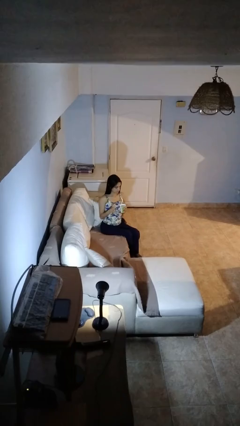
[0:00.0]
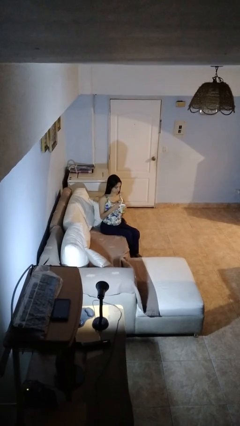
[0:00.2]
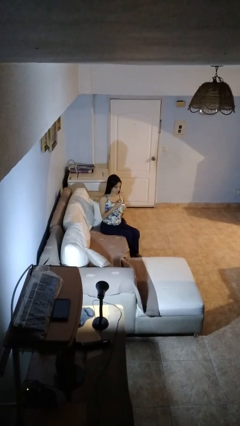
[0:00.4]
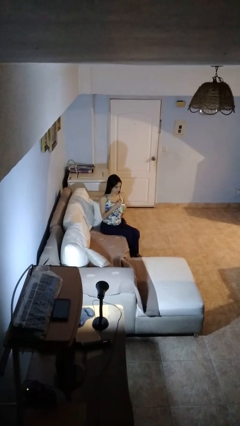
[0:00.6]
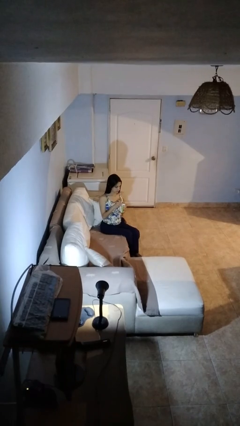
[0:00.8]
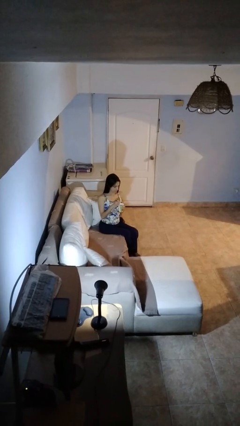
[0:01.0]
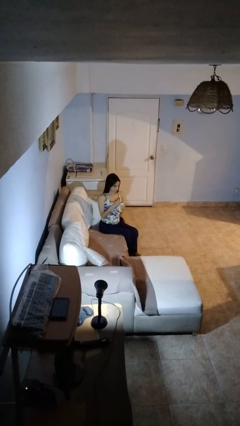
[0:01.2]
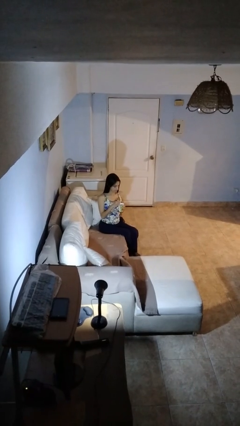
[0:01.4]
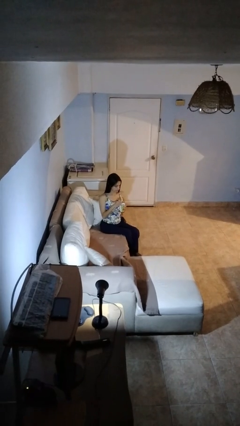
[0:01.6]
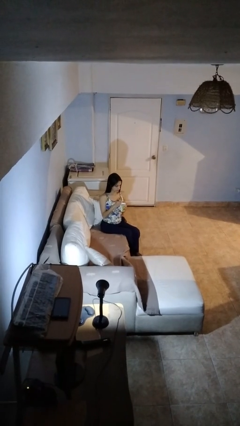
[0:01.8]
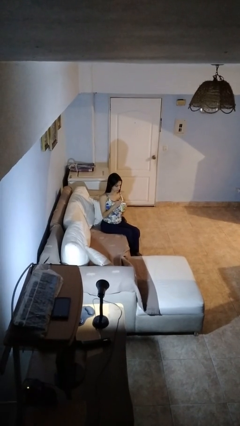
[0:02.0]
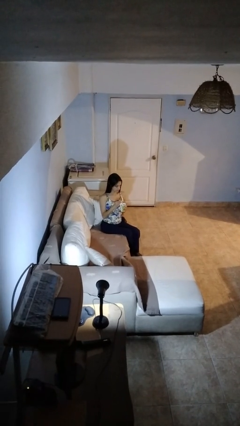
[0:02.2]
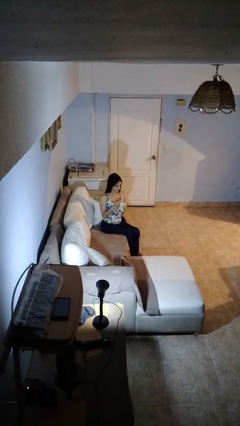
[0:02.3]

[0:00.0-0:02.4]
person stirs mug

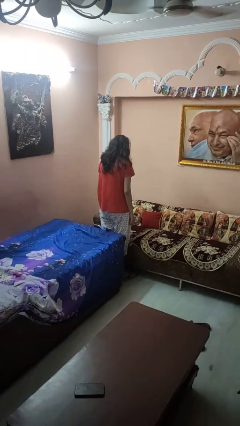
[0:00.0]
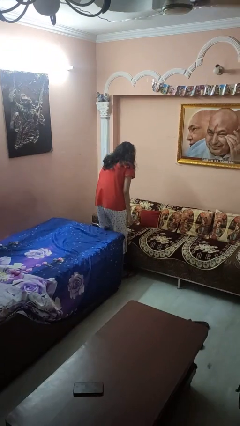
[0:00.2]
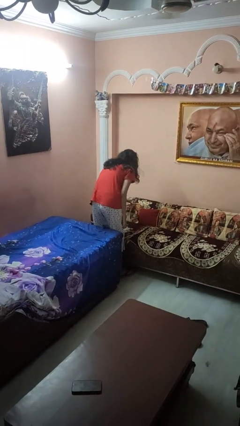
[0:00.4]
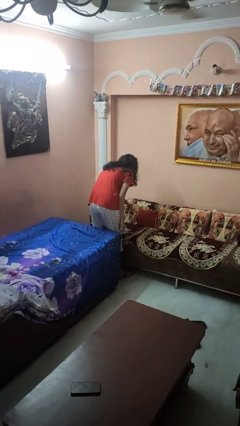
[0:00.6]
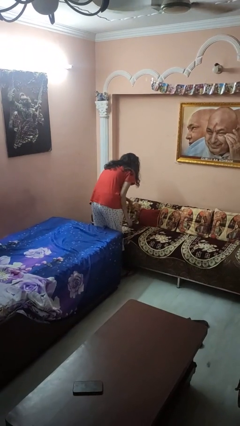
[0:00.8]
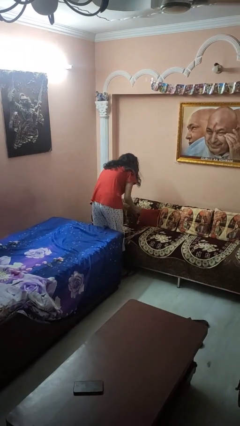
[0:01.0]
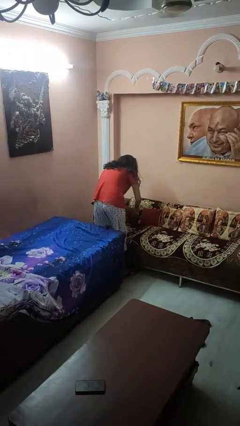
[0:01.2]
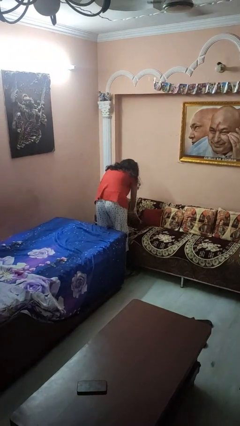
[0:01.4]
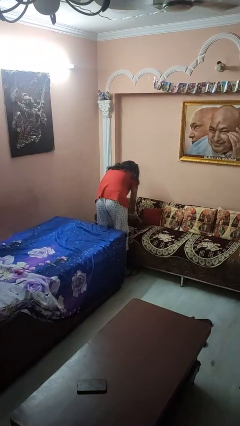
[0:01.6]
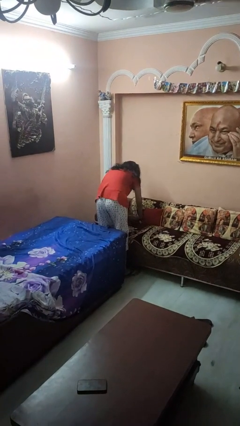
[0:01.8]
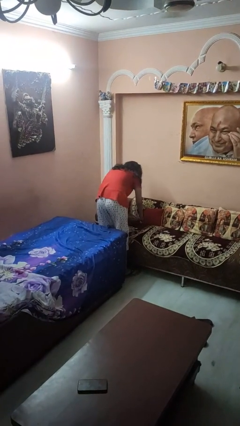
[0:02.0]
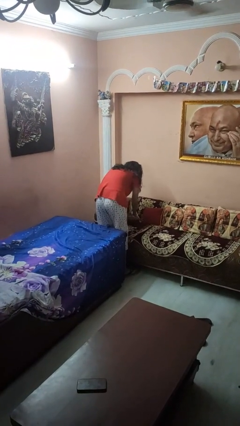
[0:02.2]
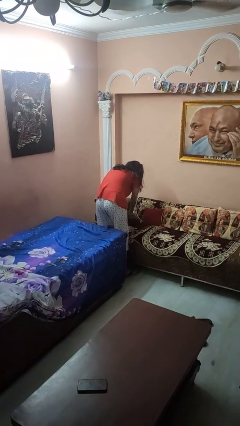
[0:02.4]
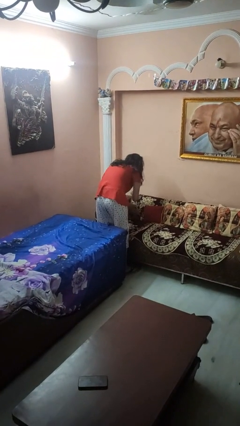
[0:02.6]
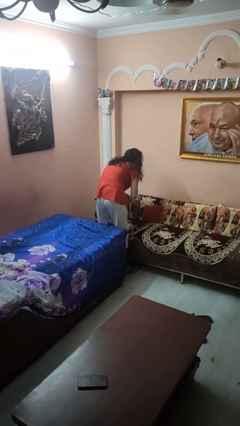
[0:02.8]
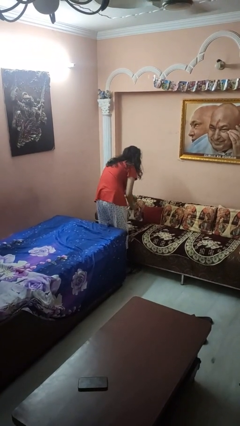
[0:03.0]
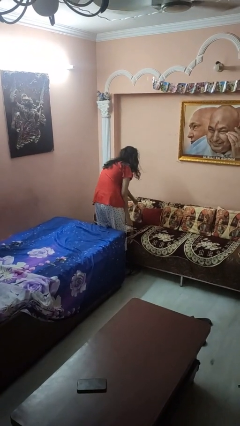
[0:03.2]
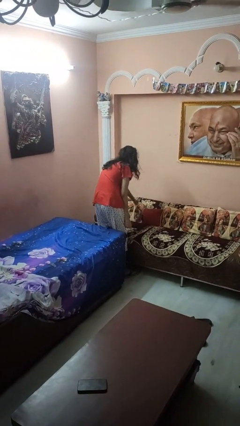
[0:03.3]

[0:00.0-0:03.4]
person searches in couch

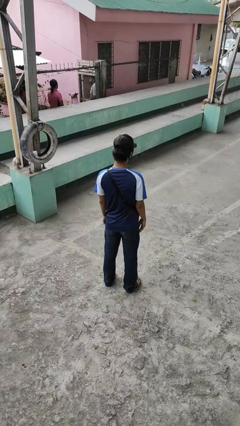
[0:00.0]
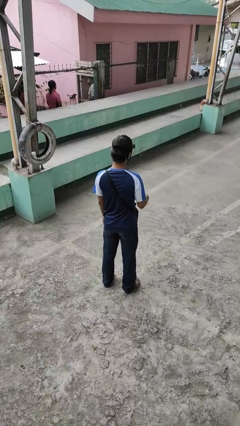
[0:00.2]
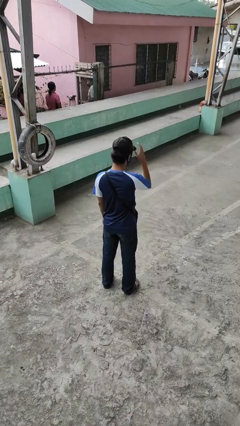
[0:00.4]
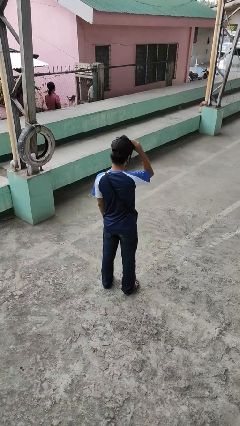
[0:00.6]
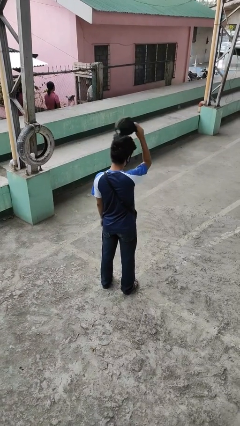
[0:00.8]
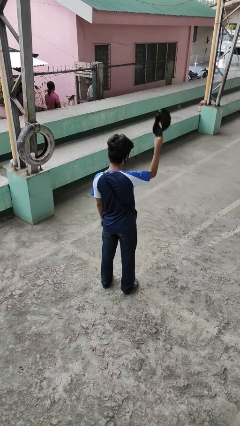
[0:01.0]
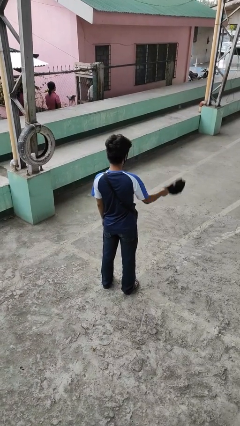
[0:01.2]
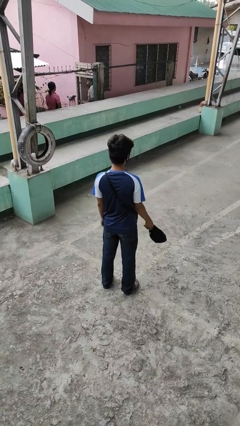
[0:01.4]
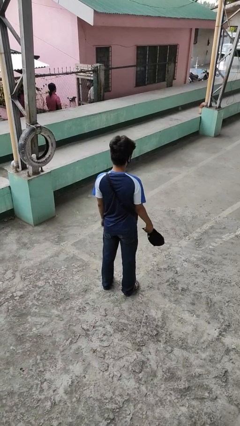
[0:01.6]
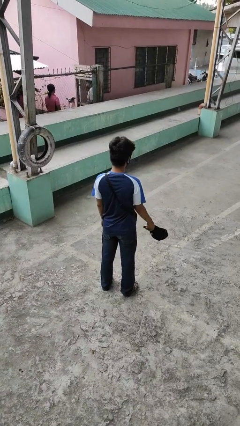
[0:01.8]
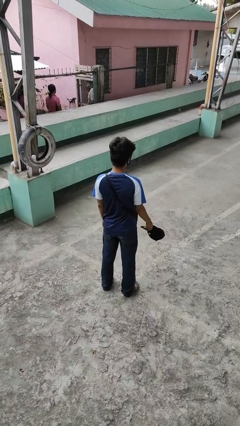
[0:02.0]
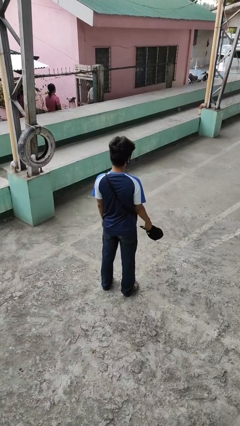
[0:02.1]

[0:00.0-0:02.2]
person takes off hat

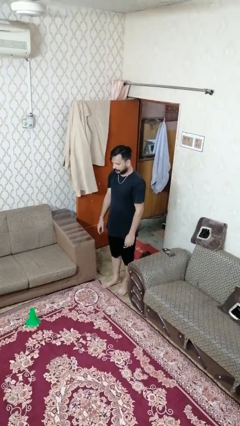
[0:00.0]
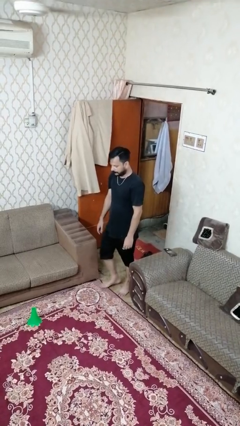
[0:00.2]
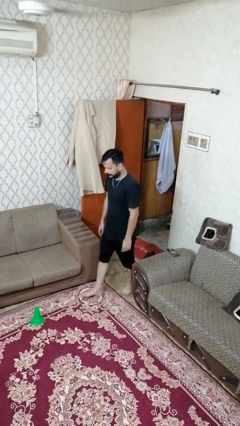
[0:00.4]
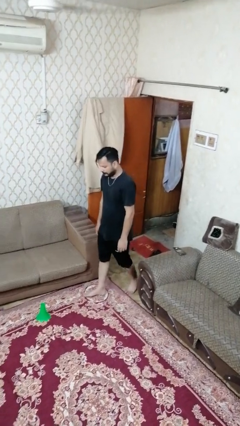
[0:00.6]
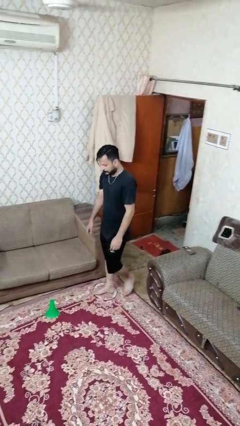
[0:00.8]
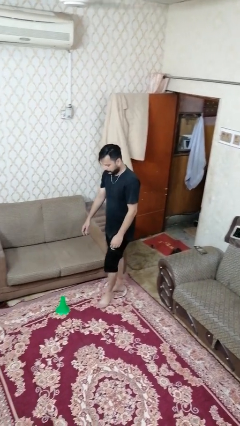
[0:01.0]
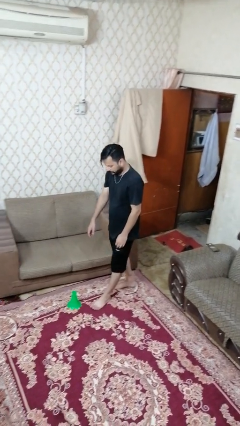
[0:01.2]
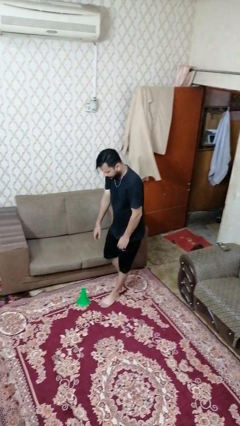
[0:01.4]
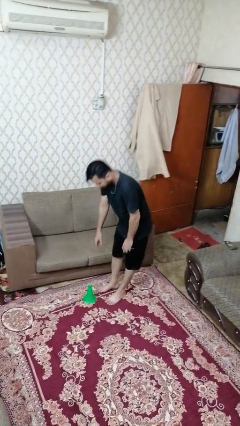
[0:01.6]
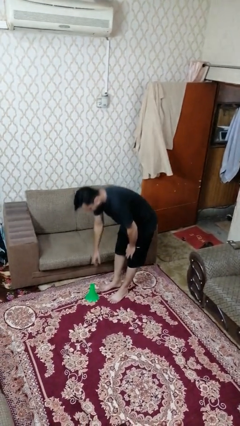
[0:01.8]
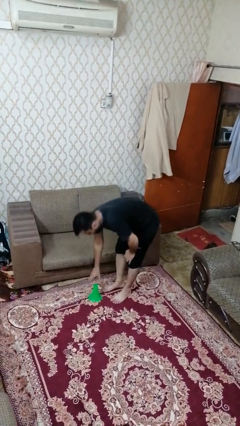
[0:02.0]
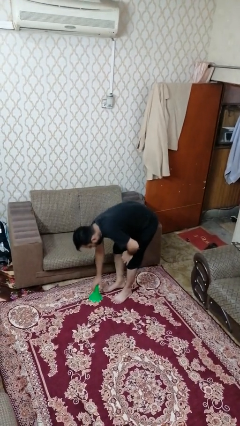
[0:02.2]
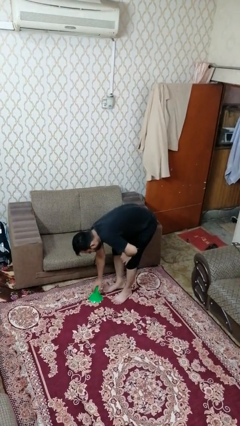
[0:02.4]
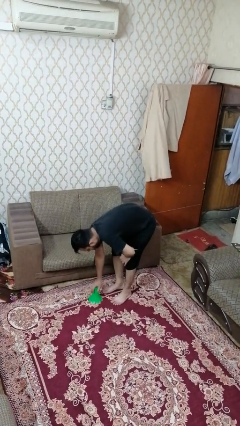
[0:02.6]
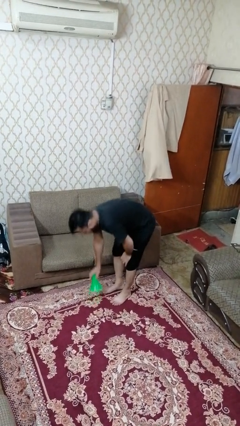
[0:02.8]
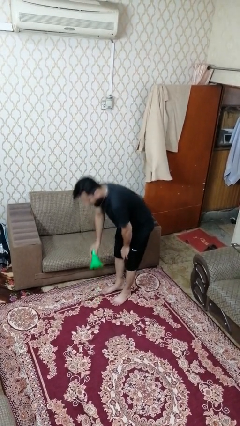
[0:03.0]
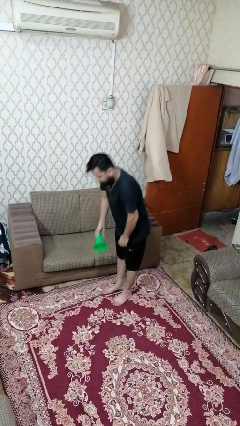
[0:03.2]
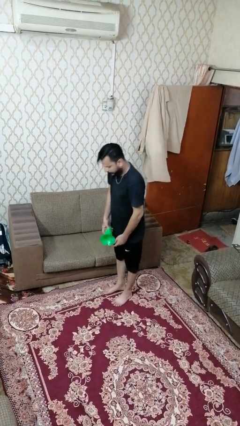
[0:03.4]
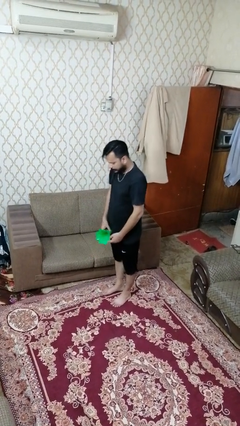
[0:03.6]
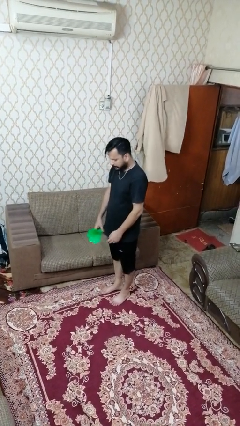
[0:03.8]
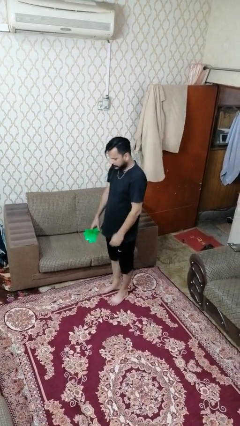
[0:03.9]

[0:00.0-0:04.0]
person picks up object from floor

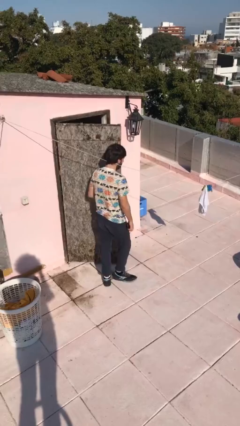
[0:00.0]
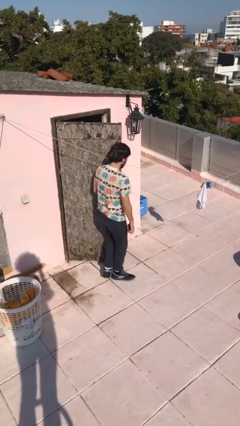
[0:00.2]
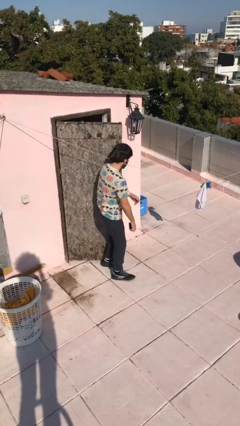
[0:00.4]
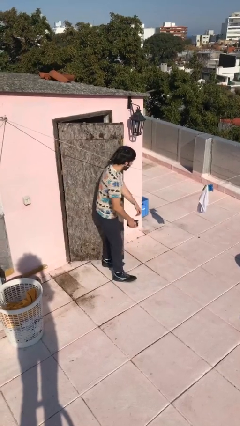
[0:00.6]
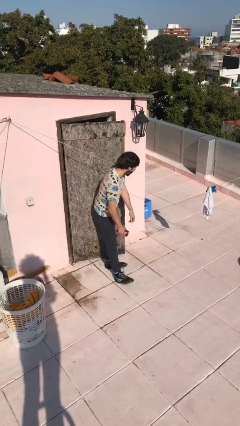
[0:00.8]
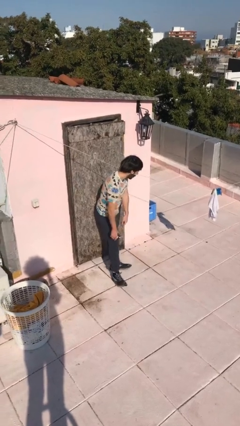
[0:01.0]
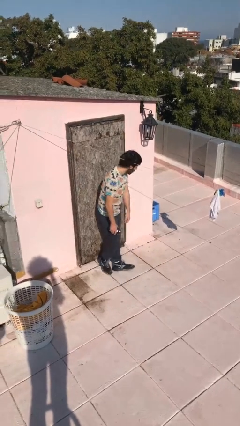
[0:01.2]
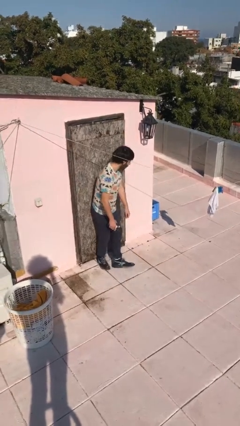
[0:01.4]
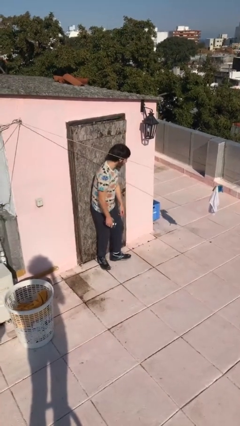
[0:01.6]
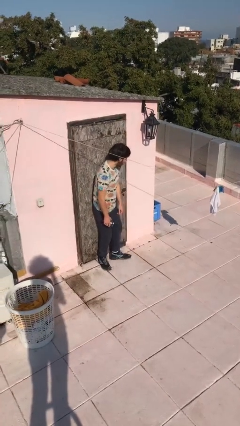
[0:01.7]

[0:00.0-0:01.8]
person closes door with hip

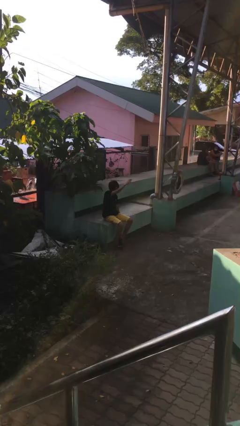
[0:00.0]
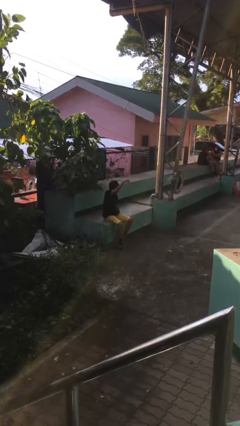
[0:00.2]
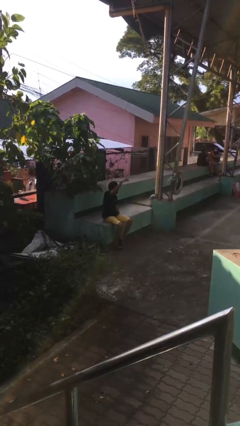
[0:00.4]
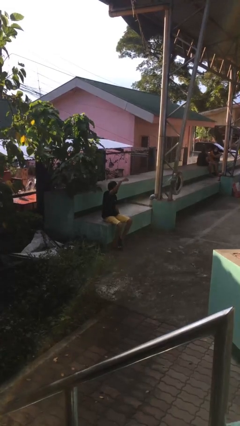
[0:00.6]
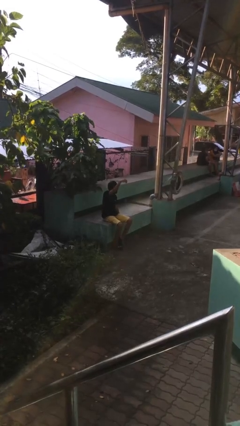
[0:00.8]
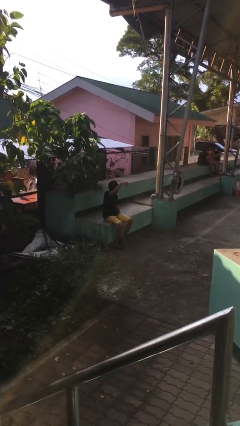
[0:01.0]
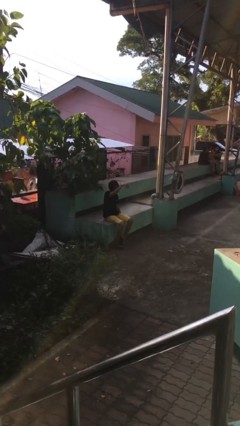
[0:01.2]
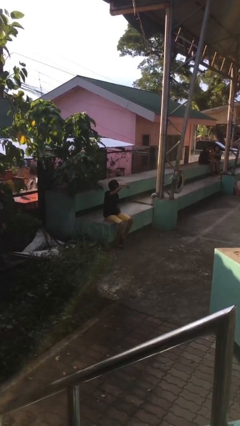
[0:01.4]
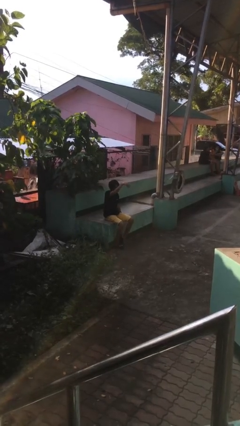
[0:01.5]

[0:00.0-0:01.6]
person gestures come here

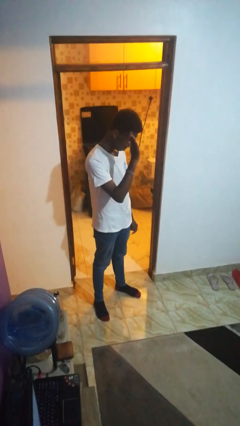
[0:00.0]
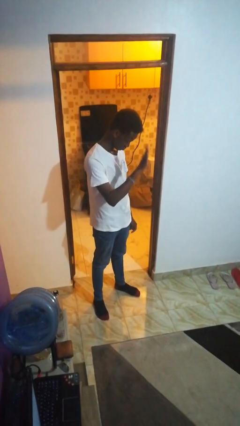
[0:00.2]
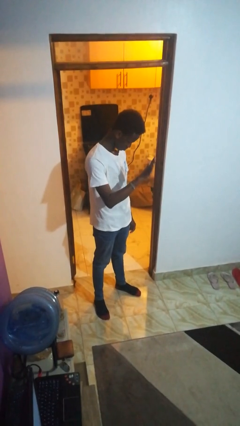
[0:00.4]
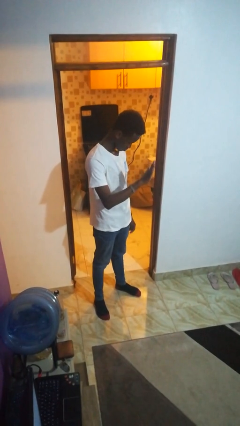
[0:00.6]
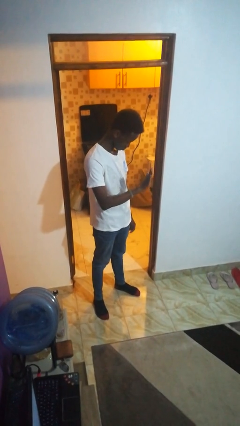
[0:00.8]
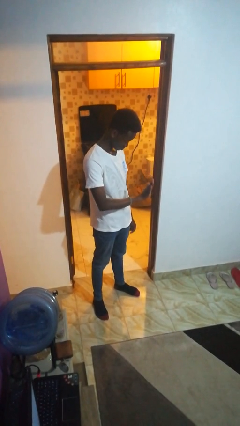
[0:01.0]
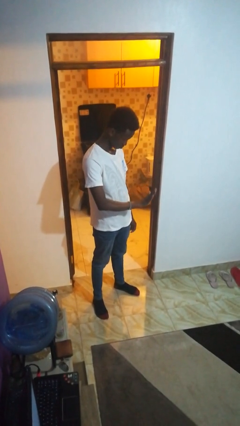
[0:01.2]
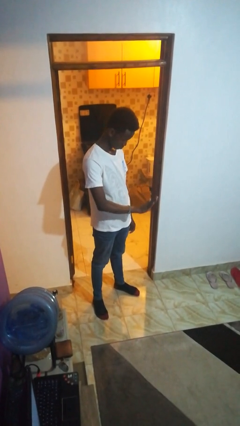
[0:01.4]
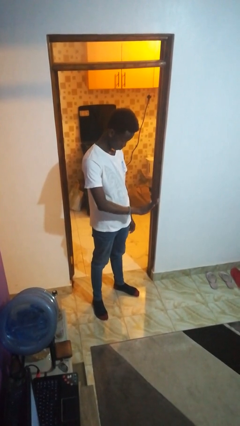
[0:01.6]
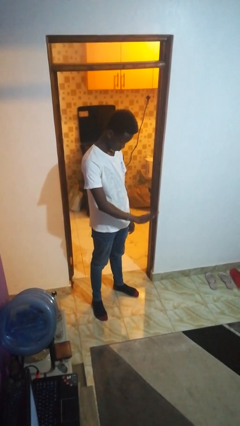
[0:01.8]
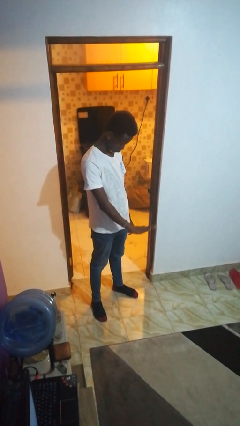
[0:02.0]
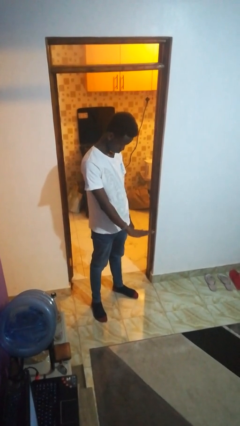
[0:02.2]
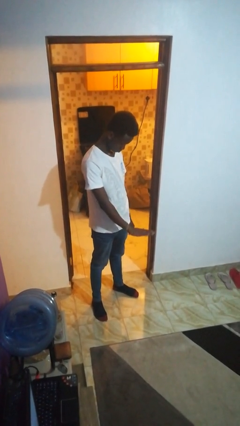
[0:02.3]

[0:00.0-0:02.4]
person gestures swipe down
